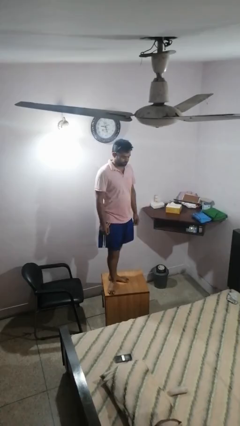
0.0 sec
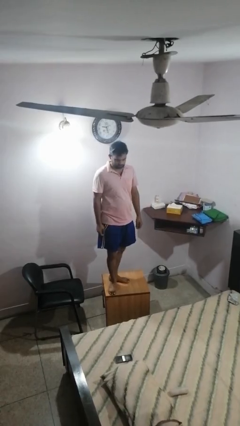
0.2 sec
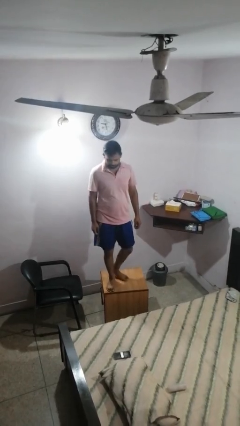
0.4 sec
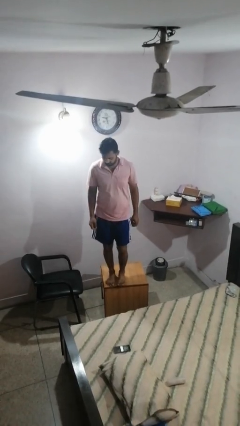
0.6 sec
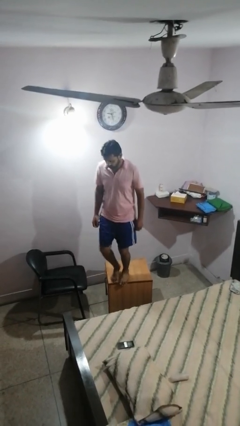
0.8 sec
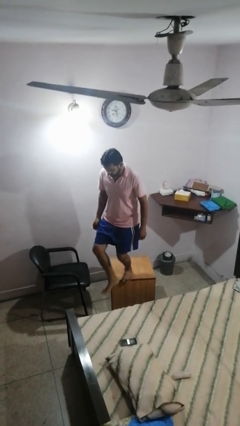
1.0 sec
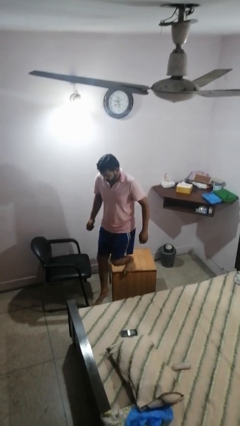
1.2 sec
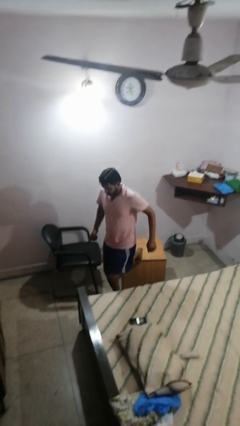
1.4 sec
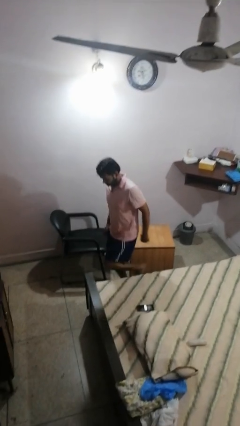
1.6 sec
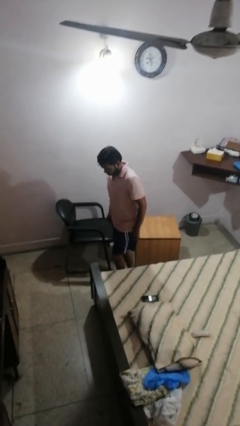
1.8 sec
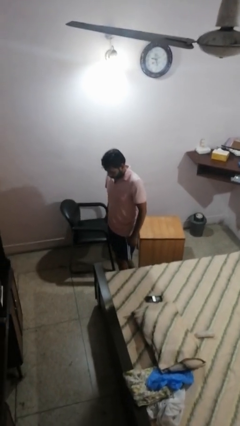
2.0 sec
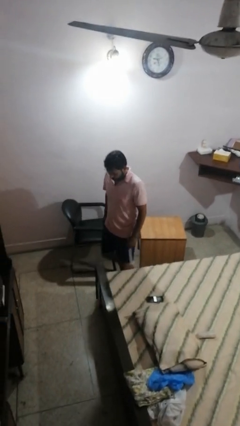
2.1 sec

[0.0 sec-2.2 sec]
person climbs off table

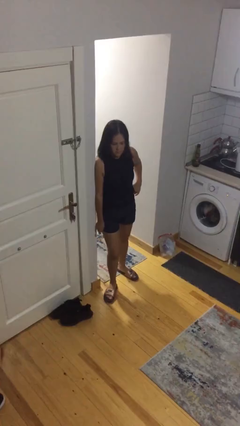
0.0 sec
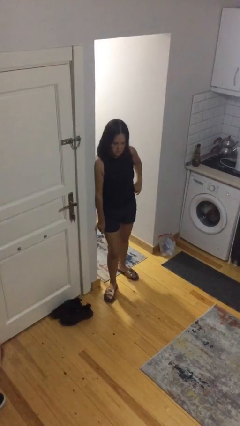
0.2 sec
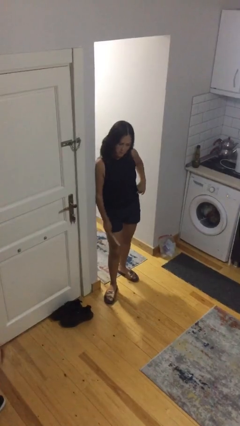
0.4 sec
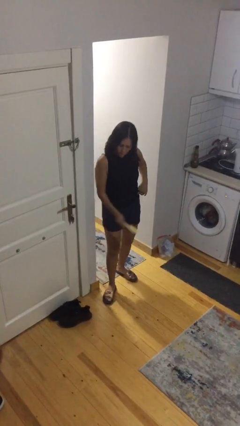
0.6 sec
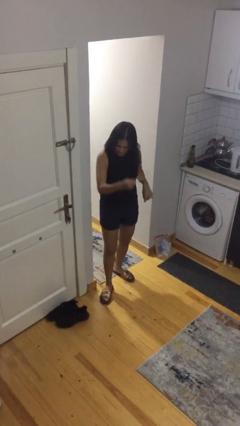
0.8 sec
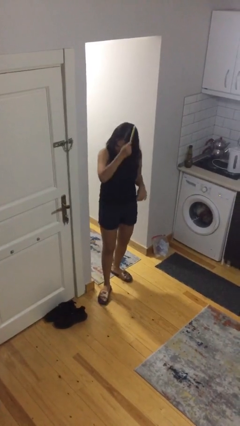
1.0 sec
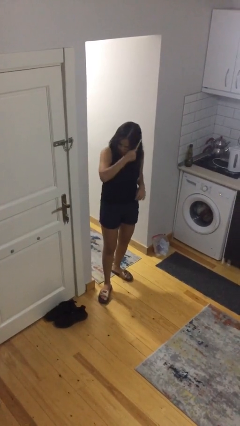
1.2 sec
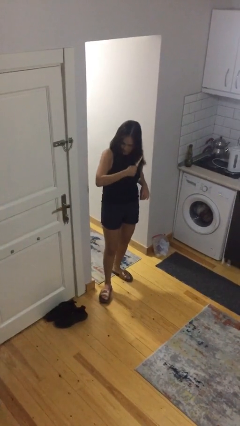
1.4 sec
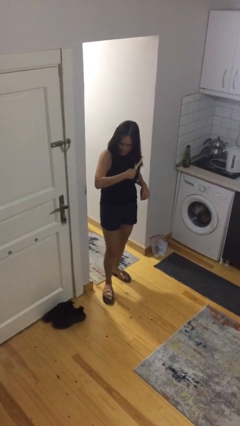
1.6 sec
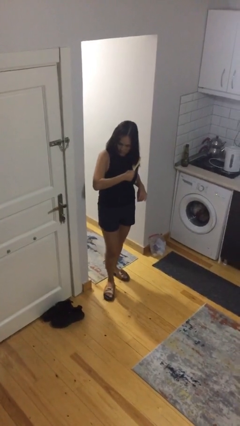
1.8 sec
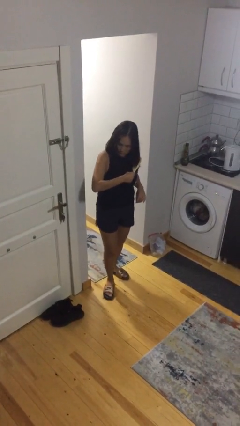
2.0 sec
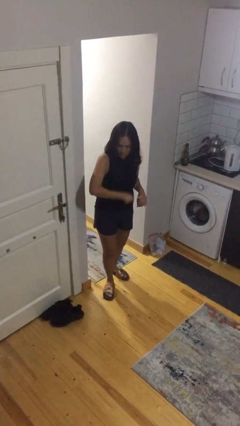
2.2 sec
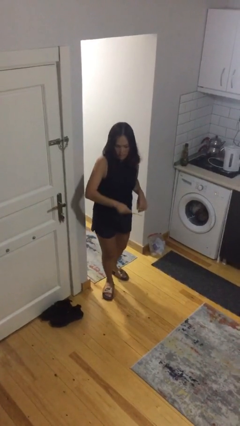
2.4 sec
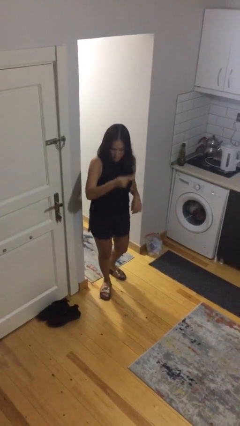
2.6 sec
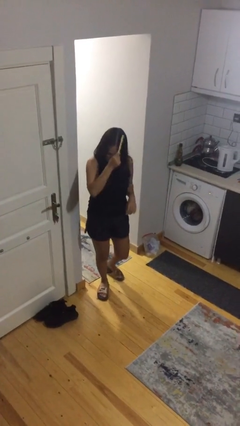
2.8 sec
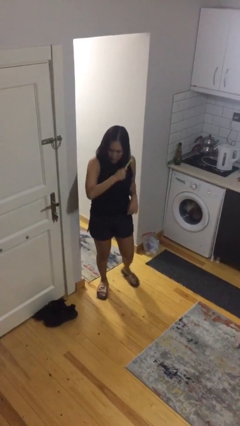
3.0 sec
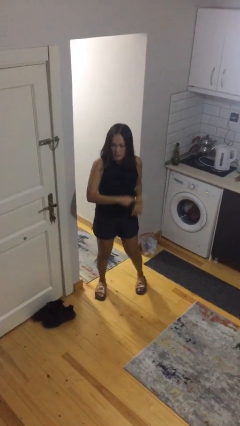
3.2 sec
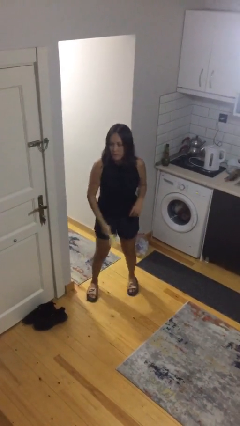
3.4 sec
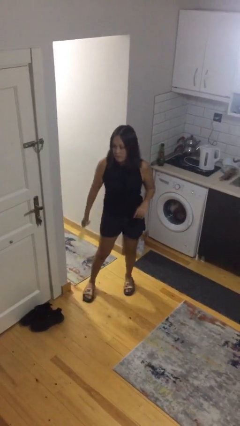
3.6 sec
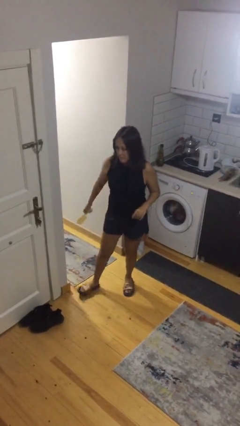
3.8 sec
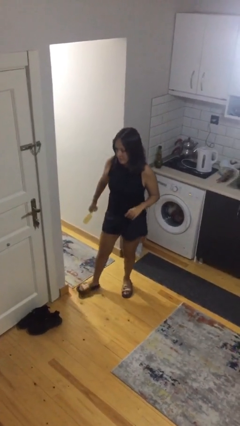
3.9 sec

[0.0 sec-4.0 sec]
person brushes hair

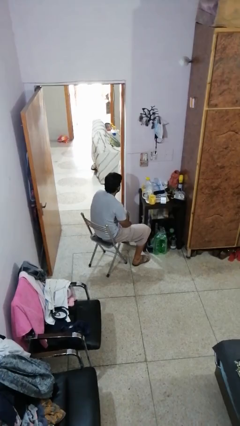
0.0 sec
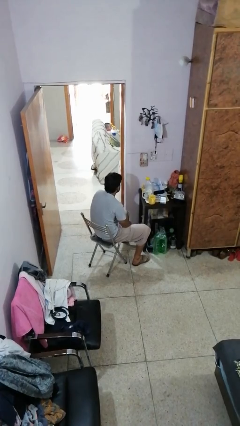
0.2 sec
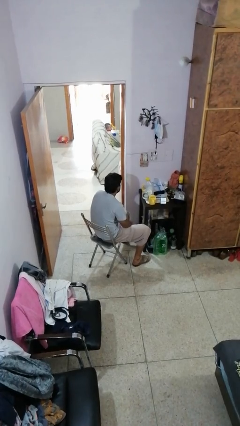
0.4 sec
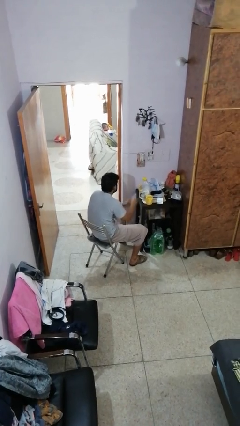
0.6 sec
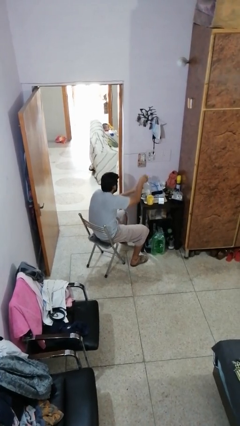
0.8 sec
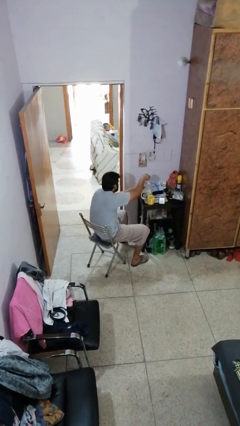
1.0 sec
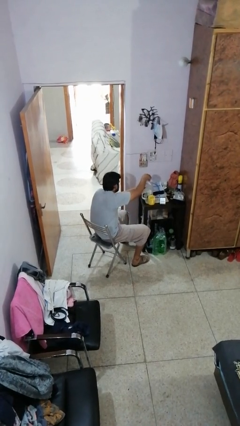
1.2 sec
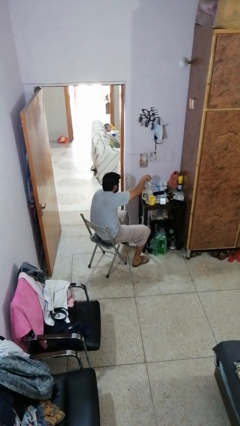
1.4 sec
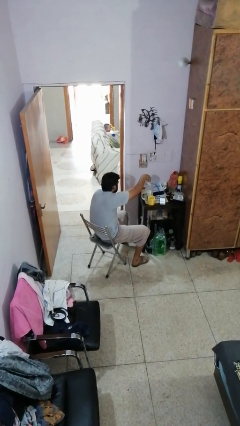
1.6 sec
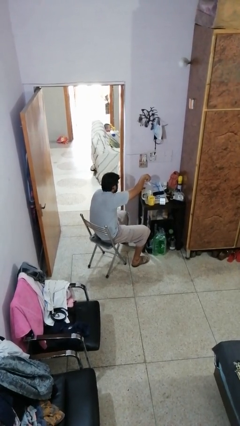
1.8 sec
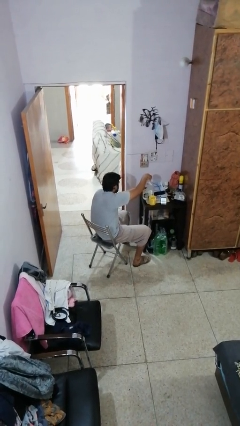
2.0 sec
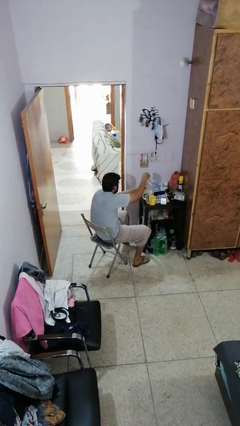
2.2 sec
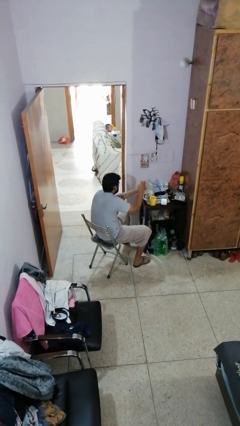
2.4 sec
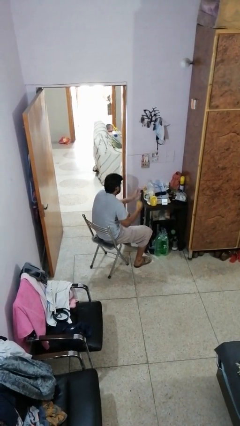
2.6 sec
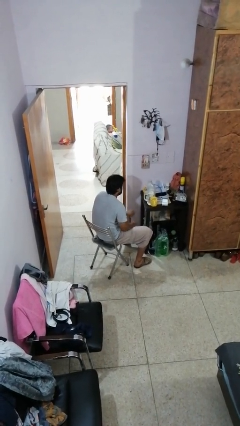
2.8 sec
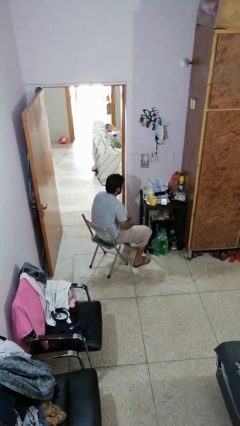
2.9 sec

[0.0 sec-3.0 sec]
person unscrews lid from bottle

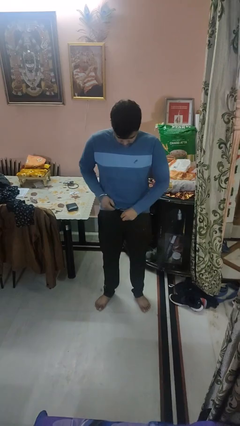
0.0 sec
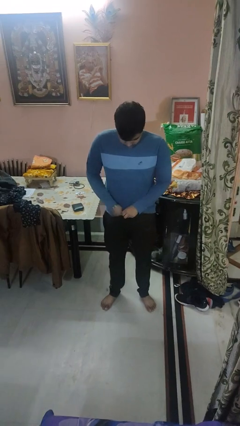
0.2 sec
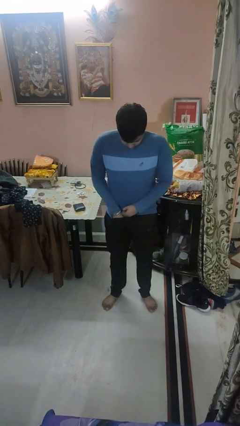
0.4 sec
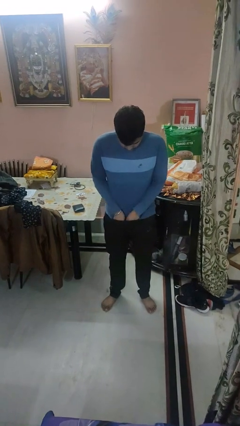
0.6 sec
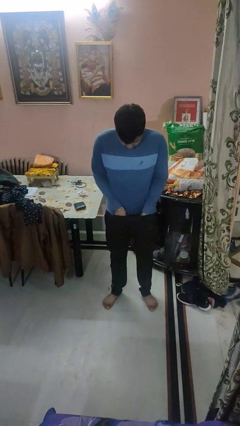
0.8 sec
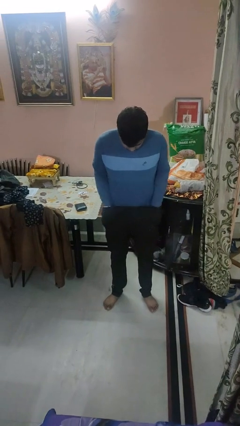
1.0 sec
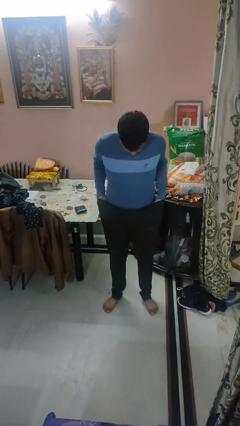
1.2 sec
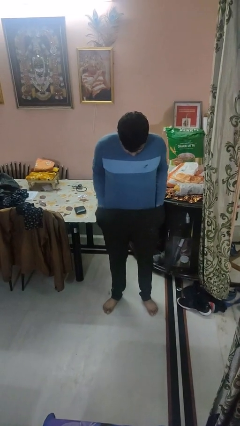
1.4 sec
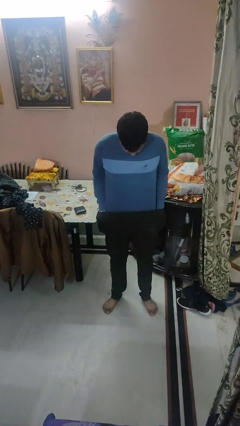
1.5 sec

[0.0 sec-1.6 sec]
person tucks in shirt

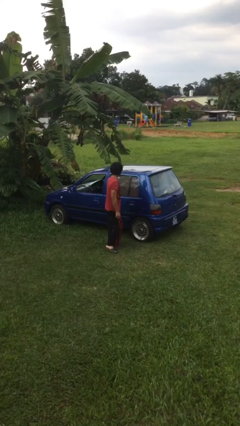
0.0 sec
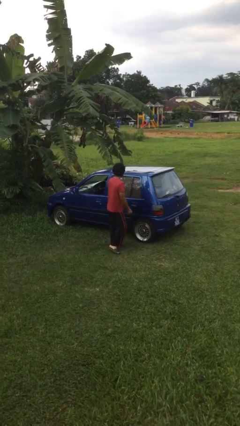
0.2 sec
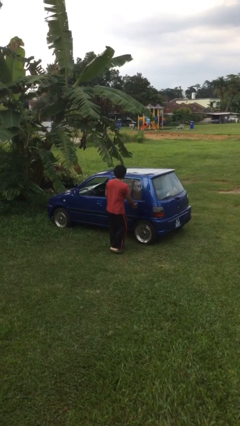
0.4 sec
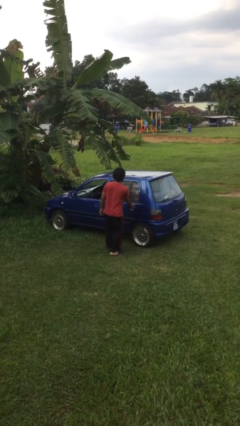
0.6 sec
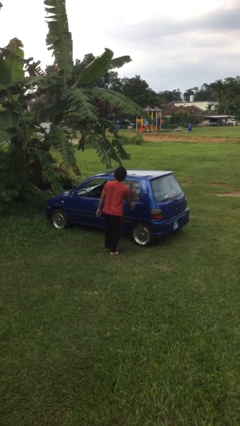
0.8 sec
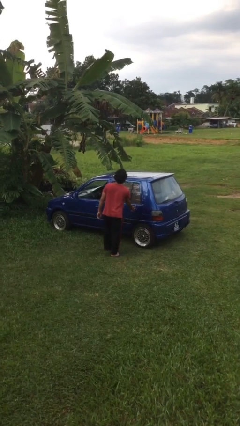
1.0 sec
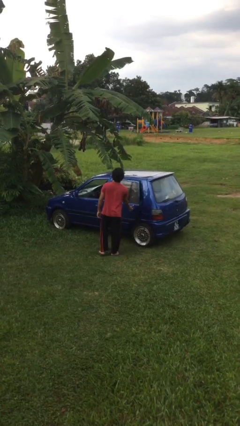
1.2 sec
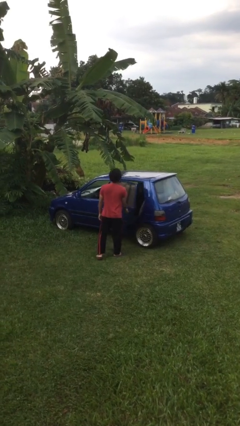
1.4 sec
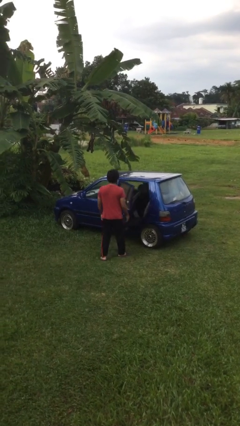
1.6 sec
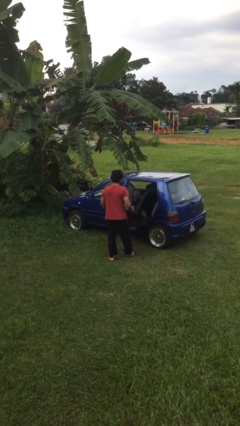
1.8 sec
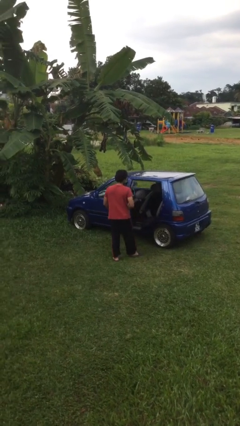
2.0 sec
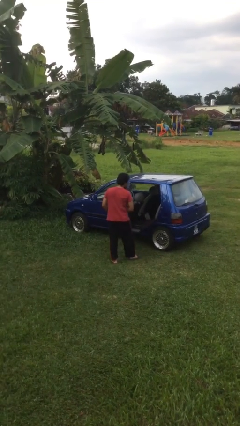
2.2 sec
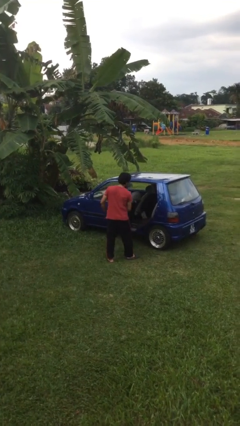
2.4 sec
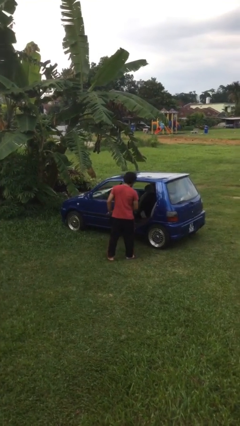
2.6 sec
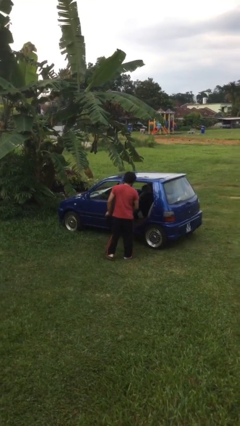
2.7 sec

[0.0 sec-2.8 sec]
person opens car door

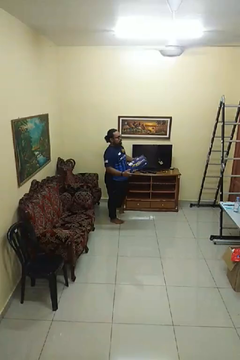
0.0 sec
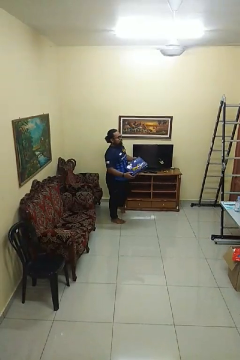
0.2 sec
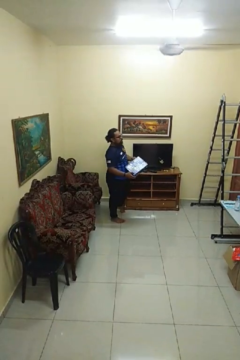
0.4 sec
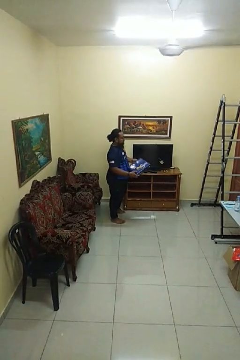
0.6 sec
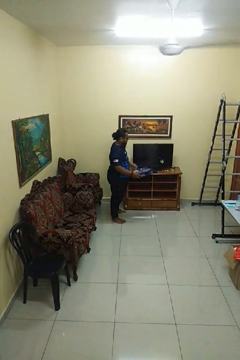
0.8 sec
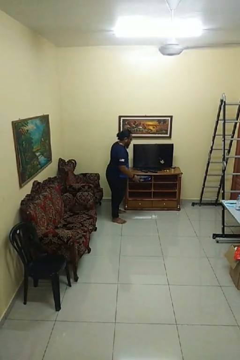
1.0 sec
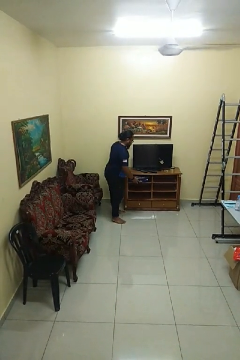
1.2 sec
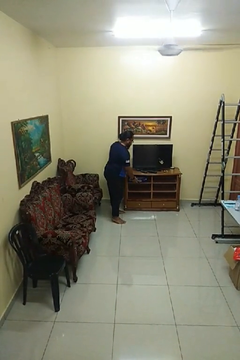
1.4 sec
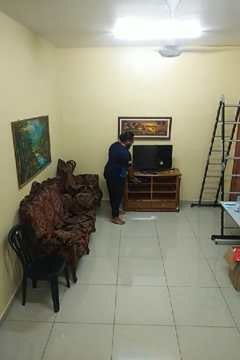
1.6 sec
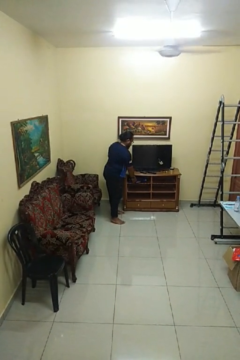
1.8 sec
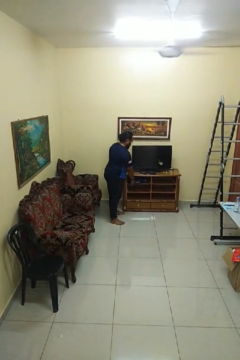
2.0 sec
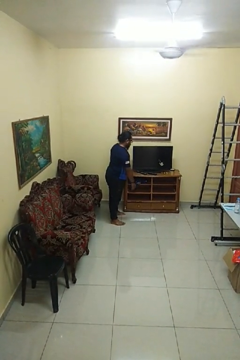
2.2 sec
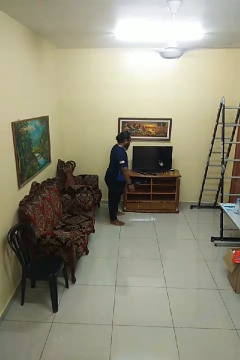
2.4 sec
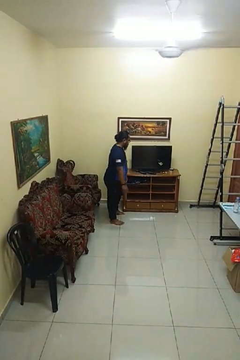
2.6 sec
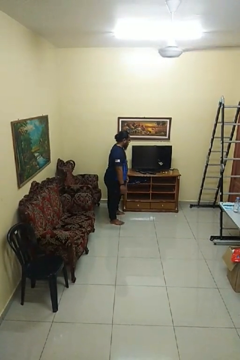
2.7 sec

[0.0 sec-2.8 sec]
person puts down object into cabinet

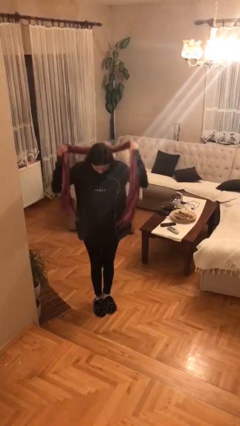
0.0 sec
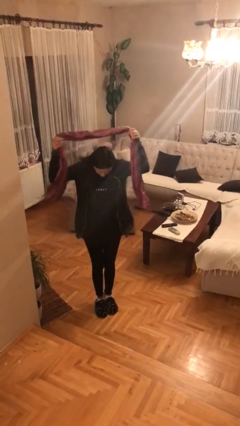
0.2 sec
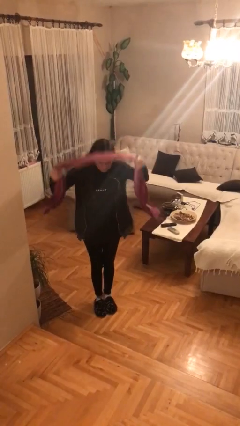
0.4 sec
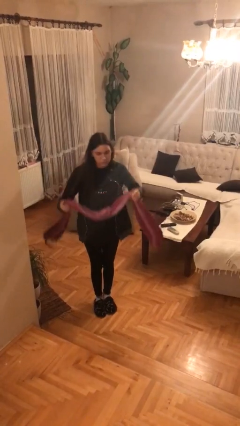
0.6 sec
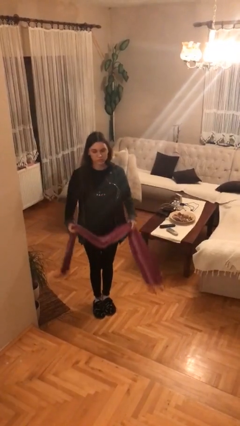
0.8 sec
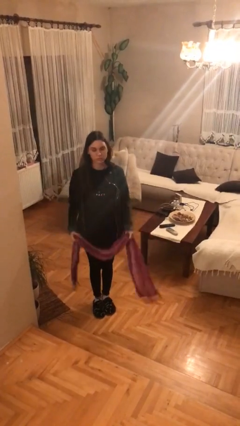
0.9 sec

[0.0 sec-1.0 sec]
person takes off scarf
